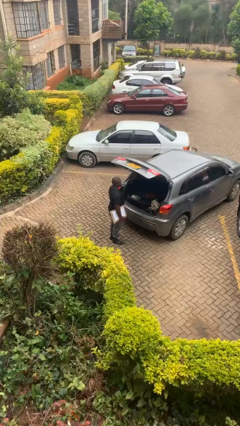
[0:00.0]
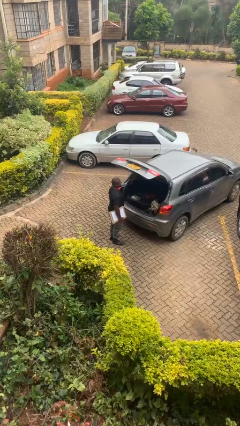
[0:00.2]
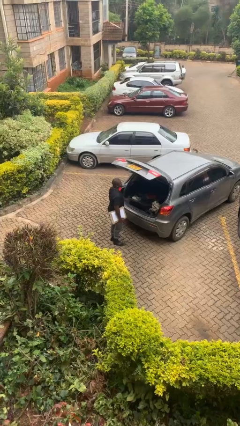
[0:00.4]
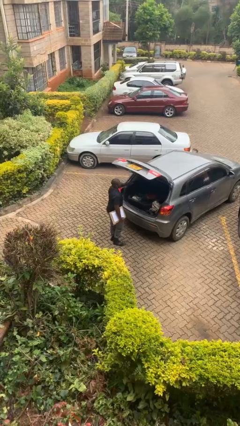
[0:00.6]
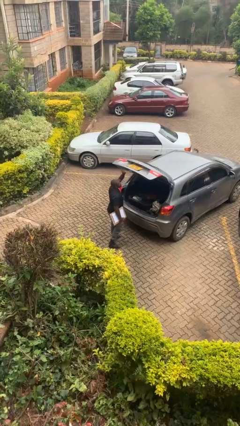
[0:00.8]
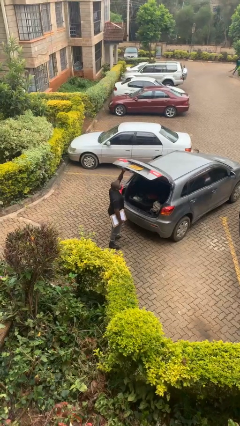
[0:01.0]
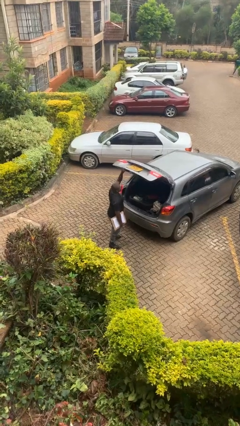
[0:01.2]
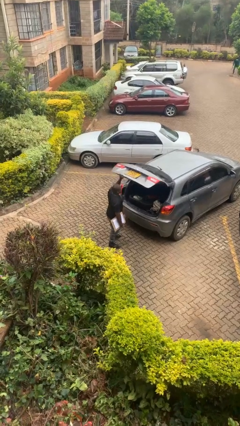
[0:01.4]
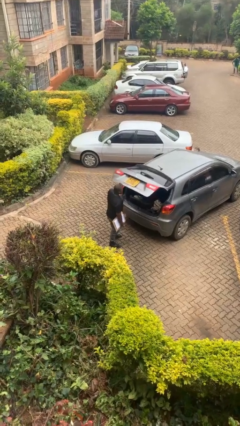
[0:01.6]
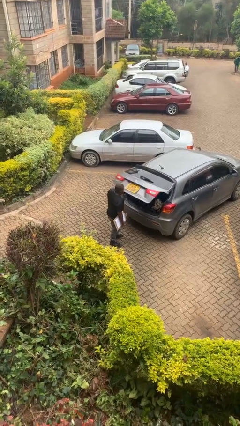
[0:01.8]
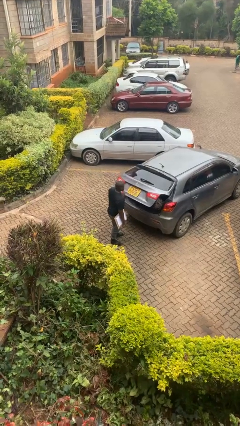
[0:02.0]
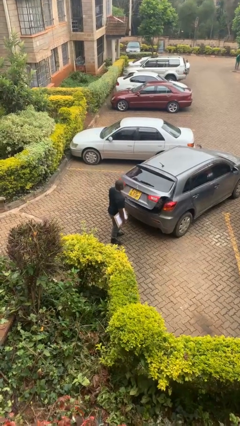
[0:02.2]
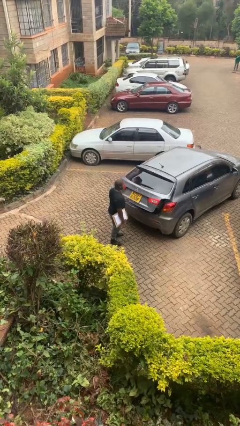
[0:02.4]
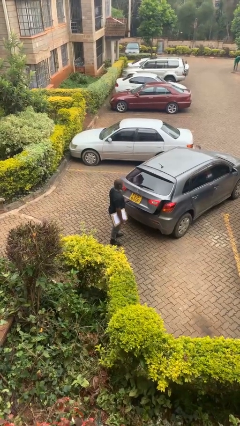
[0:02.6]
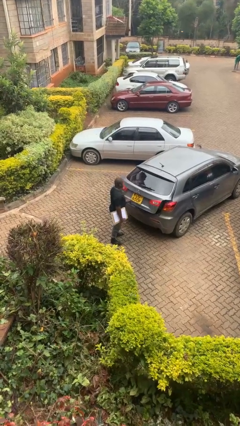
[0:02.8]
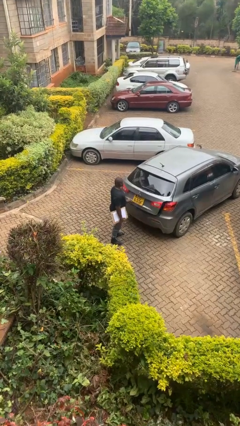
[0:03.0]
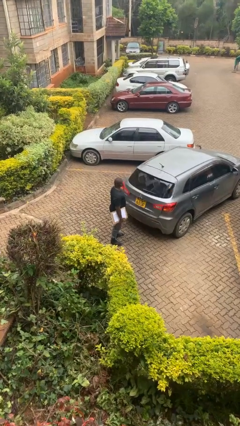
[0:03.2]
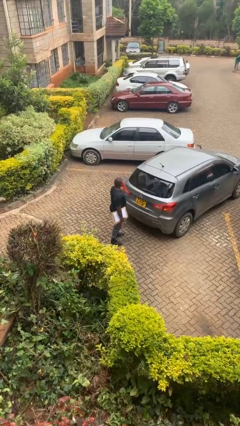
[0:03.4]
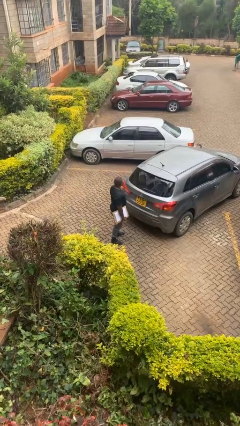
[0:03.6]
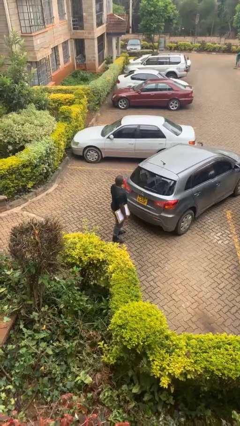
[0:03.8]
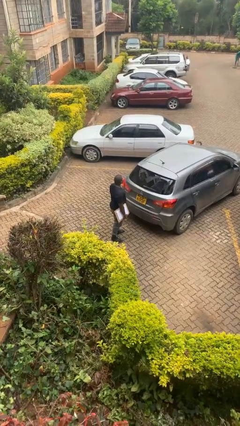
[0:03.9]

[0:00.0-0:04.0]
person closes car trunk

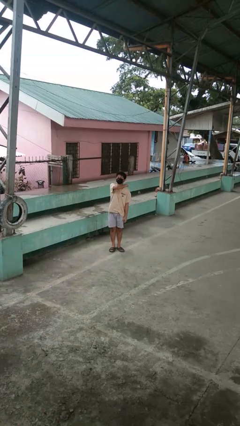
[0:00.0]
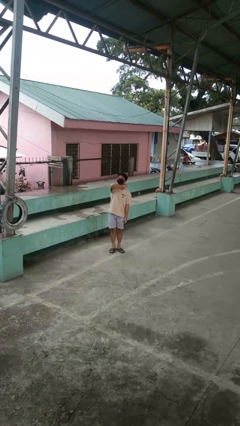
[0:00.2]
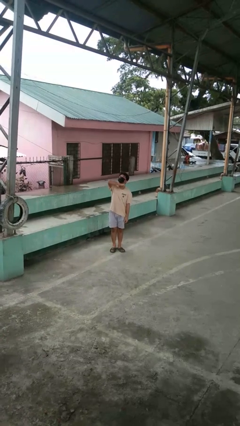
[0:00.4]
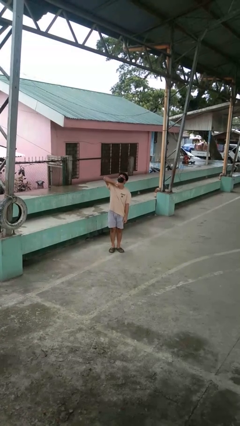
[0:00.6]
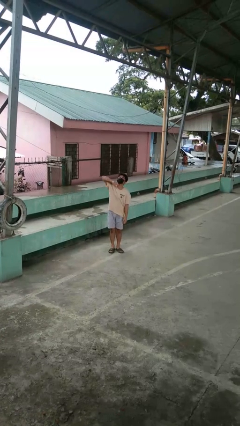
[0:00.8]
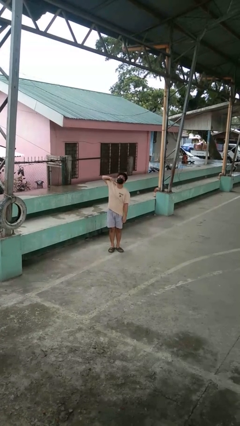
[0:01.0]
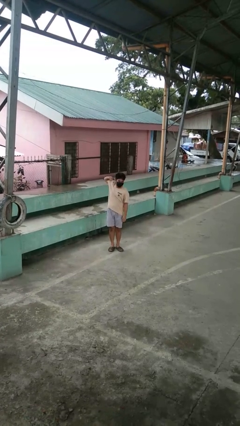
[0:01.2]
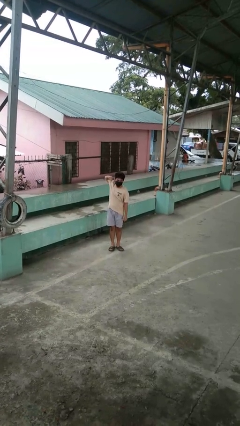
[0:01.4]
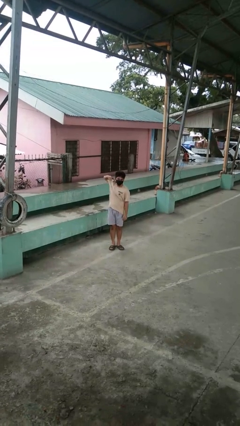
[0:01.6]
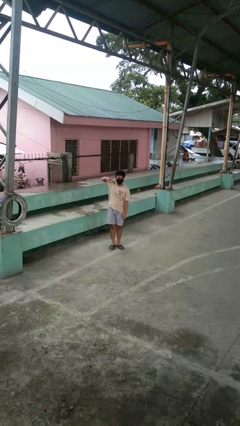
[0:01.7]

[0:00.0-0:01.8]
person gestures cut

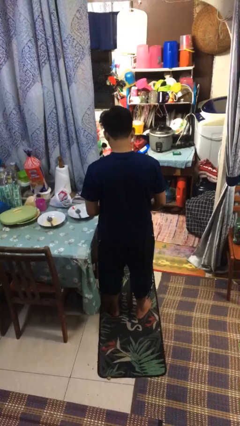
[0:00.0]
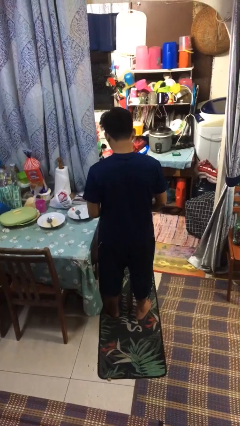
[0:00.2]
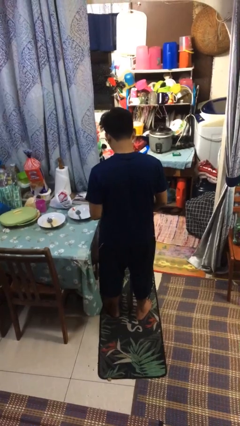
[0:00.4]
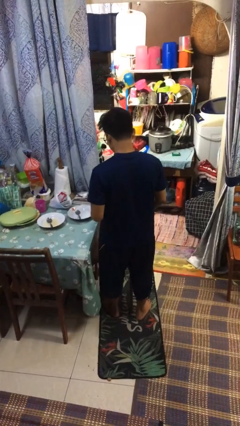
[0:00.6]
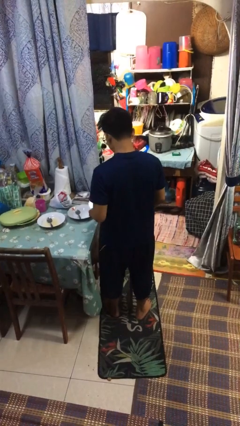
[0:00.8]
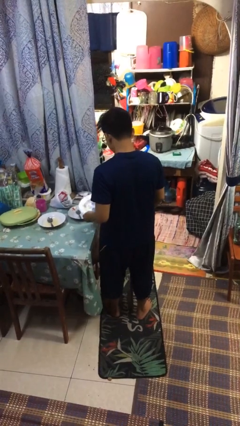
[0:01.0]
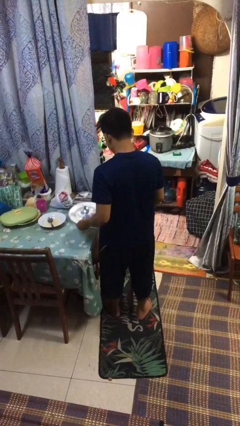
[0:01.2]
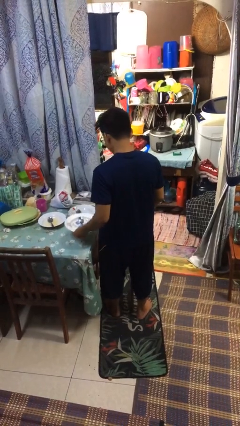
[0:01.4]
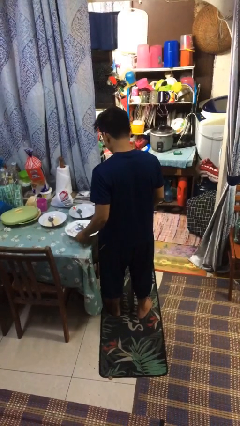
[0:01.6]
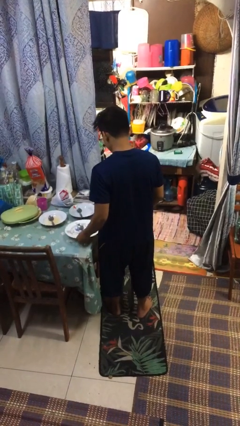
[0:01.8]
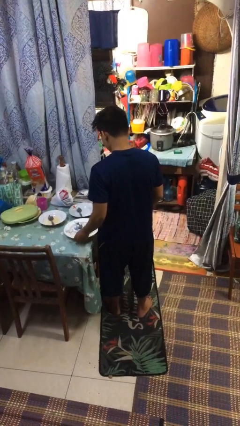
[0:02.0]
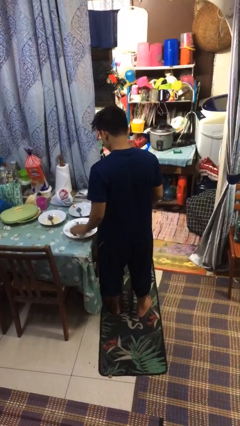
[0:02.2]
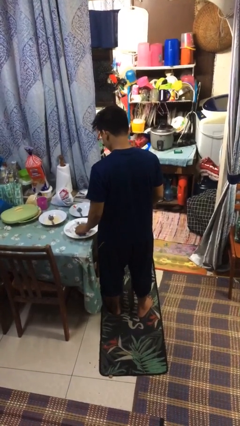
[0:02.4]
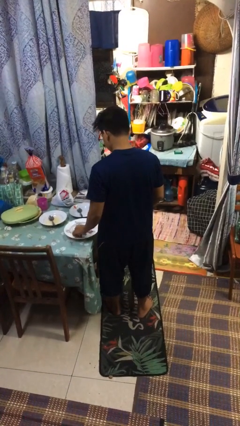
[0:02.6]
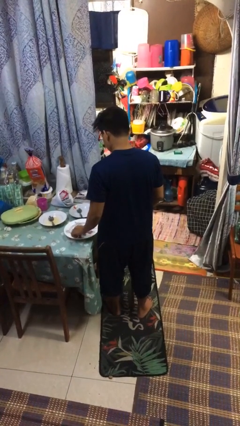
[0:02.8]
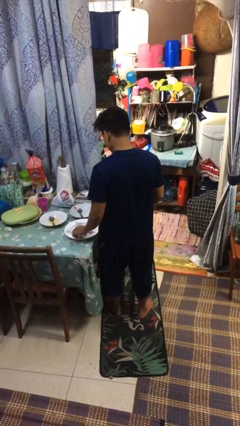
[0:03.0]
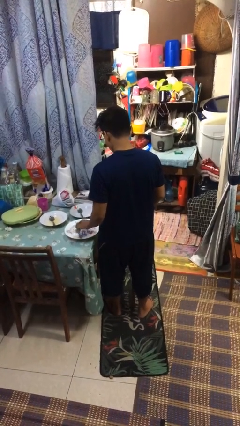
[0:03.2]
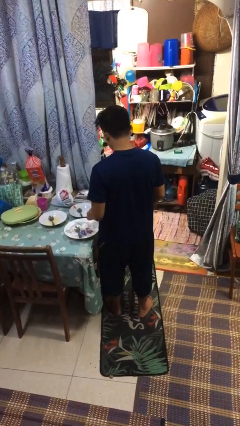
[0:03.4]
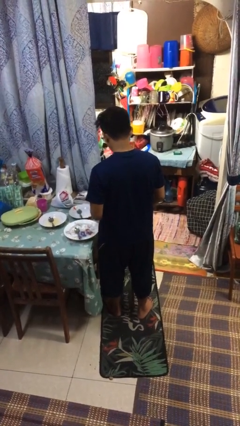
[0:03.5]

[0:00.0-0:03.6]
person sets table

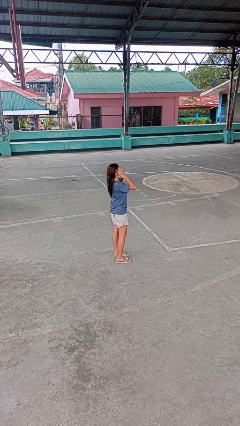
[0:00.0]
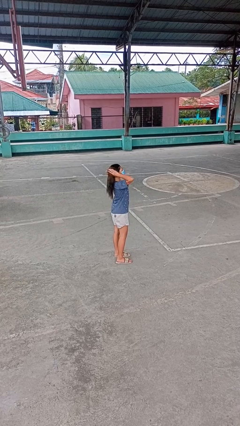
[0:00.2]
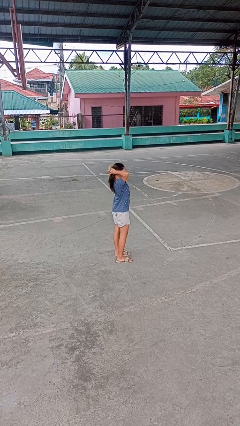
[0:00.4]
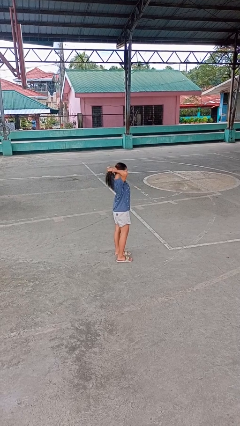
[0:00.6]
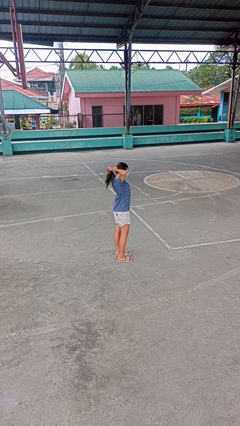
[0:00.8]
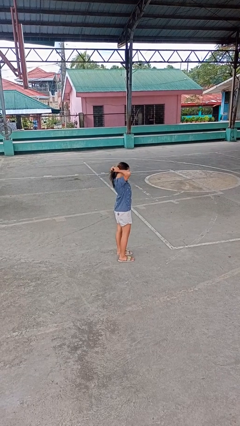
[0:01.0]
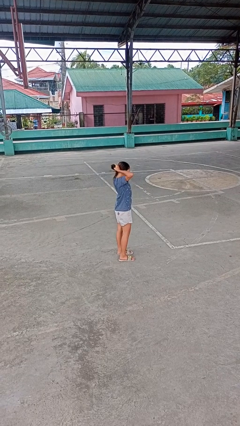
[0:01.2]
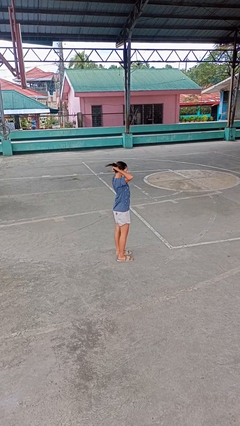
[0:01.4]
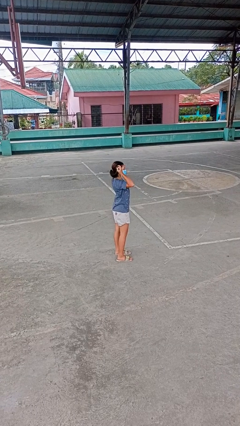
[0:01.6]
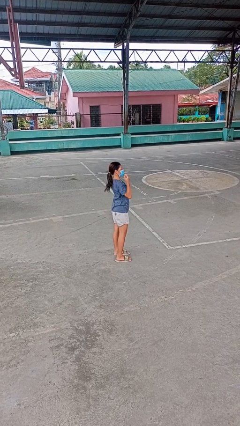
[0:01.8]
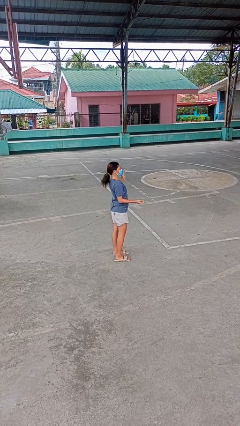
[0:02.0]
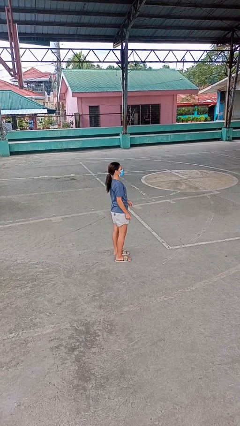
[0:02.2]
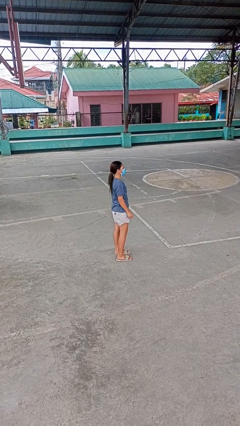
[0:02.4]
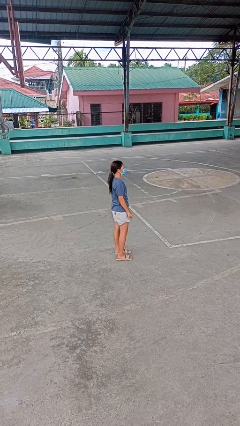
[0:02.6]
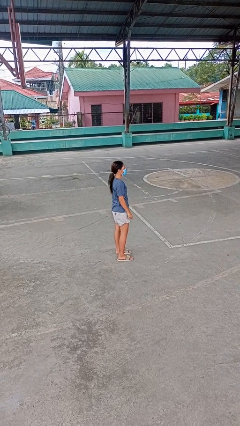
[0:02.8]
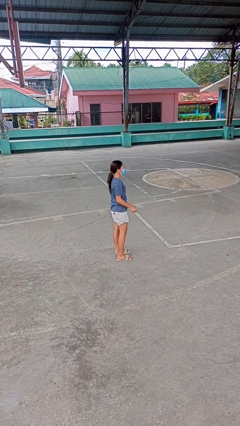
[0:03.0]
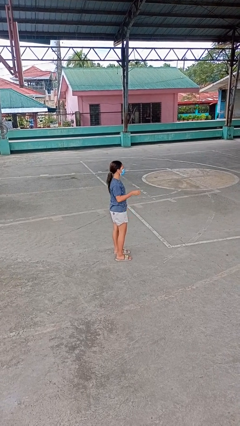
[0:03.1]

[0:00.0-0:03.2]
person puts hair in ponytail

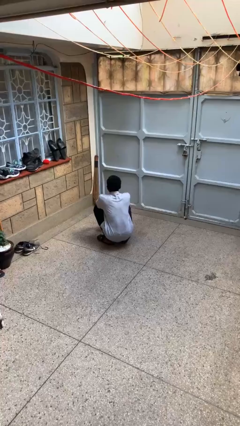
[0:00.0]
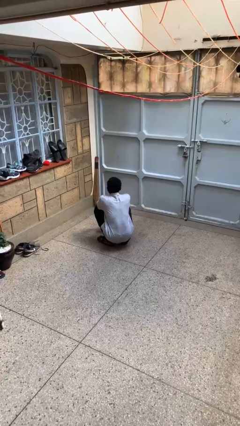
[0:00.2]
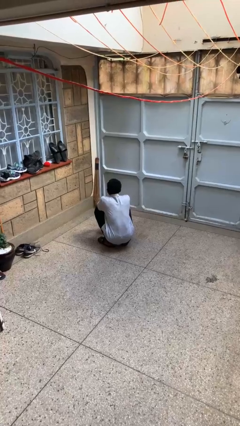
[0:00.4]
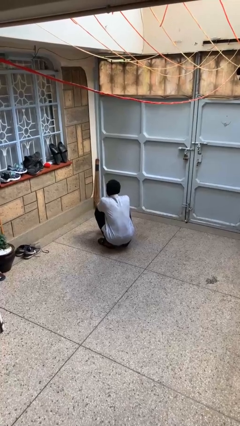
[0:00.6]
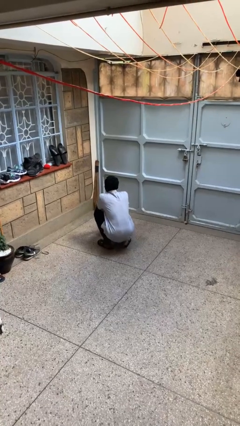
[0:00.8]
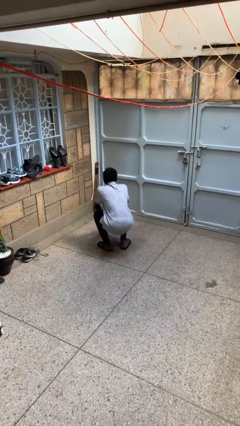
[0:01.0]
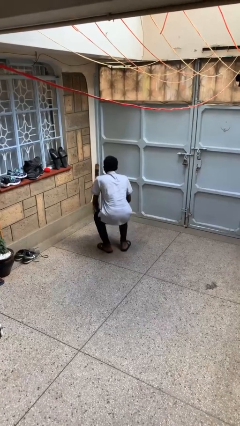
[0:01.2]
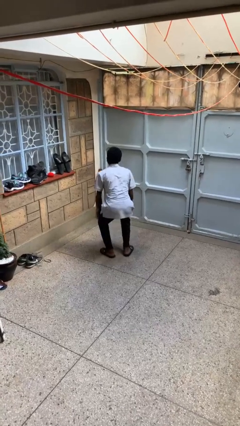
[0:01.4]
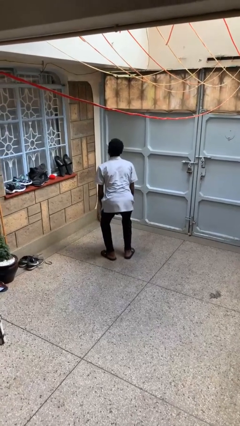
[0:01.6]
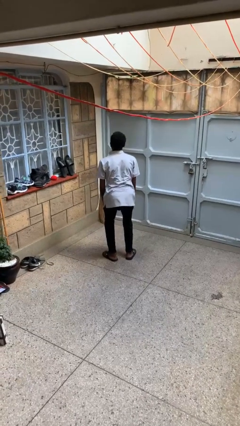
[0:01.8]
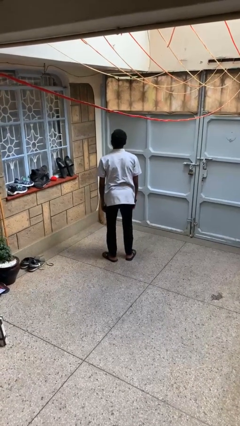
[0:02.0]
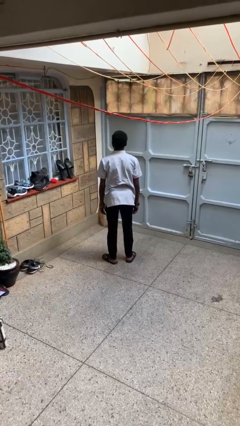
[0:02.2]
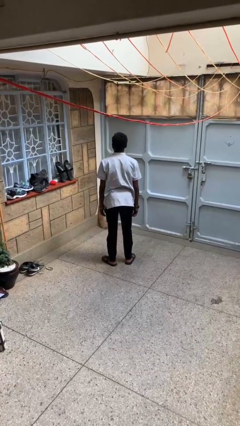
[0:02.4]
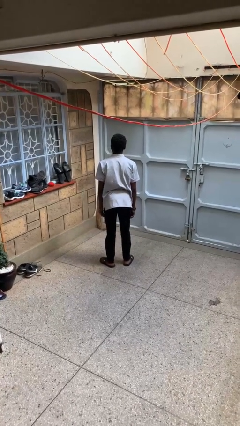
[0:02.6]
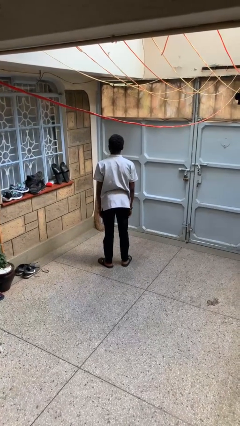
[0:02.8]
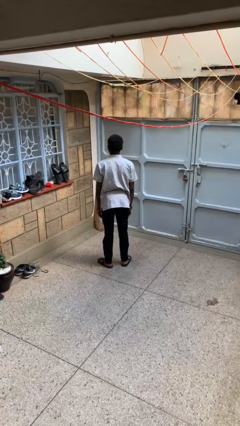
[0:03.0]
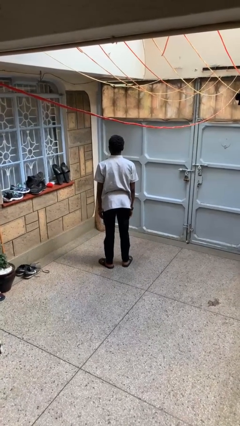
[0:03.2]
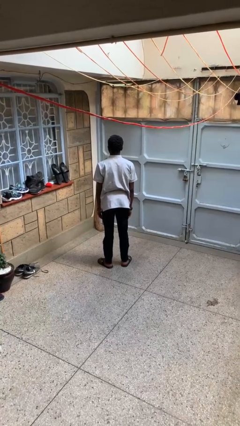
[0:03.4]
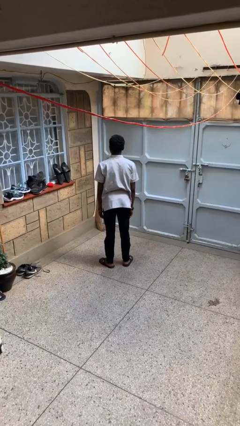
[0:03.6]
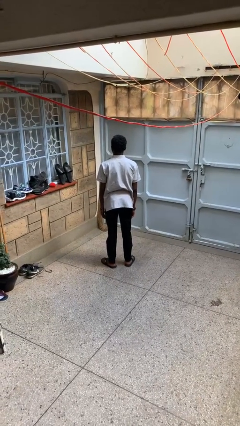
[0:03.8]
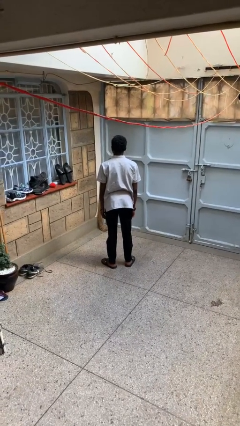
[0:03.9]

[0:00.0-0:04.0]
person stands up

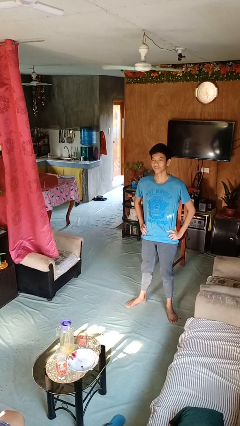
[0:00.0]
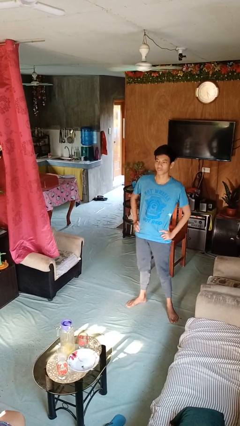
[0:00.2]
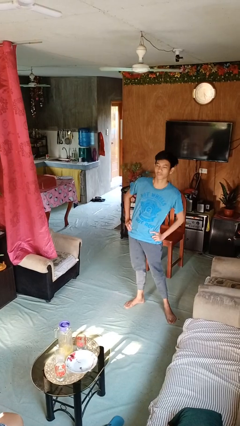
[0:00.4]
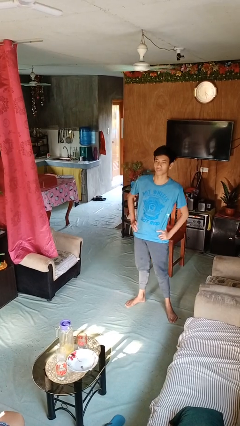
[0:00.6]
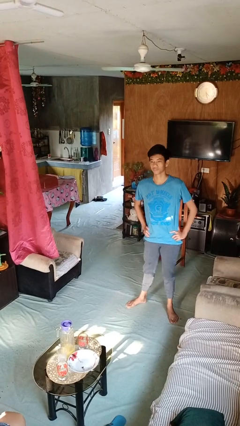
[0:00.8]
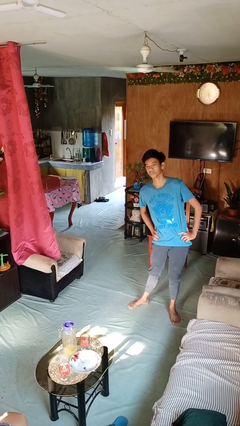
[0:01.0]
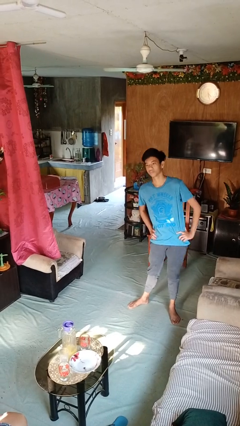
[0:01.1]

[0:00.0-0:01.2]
person wiggles hips
